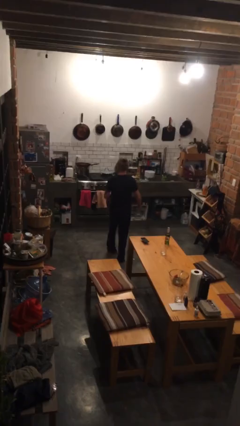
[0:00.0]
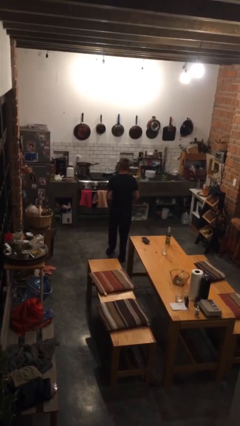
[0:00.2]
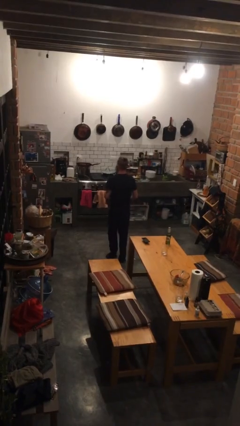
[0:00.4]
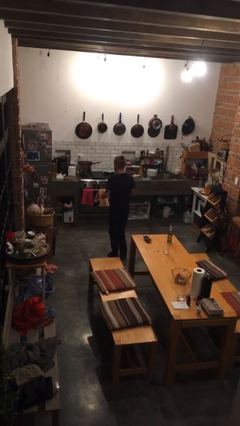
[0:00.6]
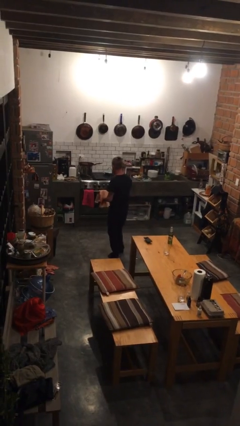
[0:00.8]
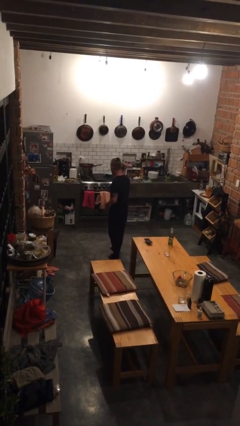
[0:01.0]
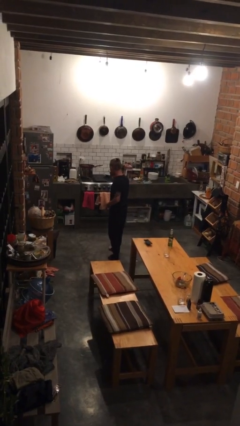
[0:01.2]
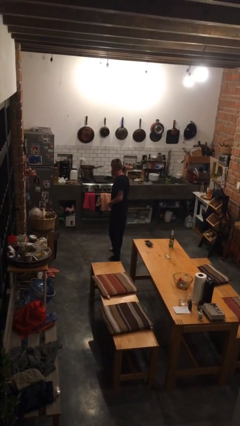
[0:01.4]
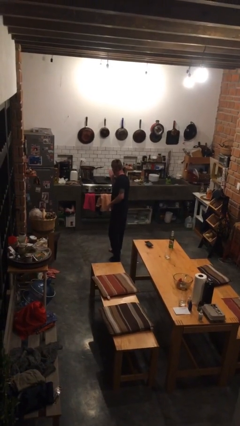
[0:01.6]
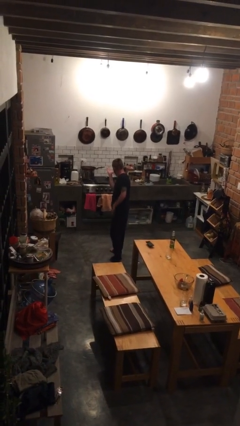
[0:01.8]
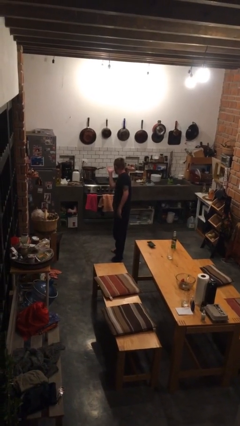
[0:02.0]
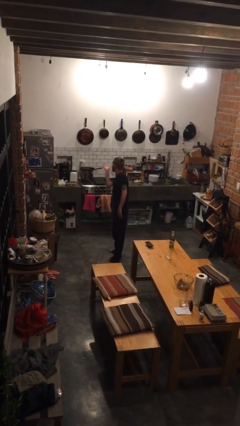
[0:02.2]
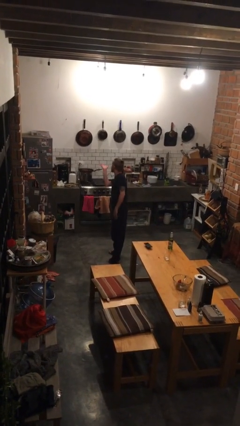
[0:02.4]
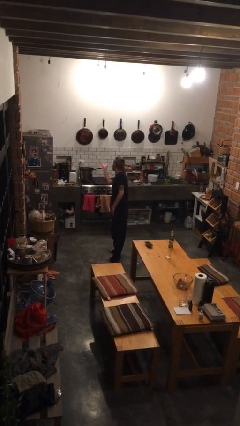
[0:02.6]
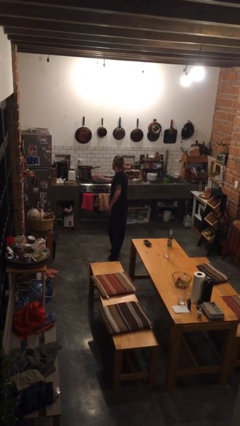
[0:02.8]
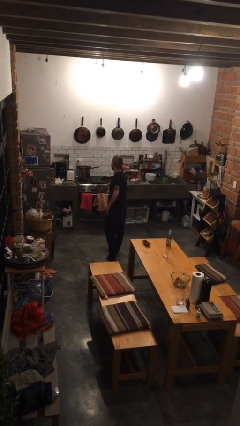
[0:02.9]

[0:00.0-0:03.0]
person gestures blow kiss

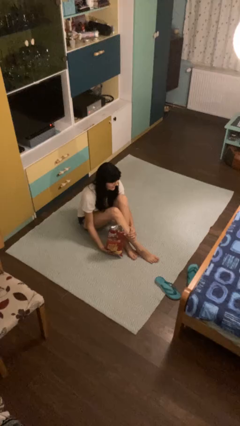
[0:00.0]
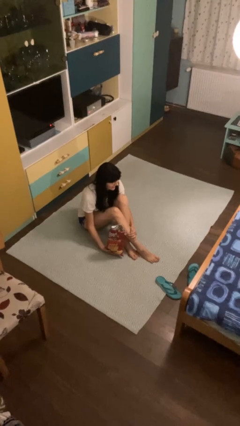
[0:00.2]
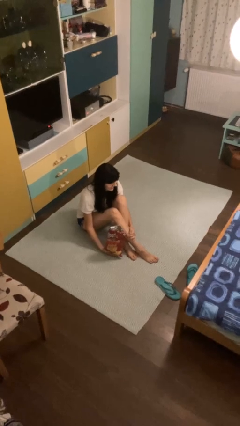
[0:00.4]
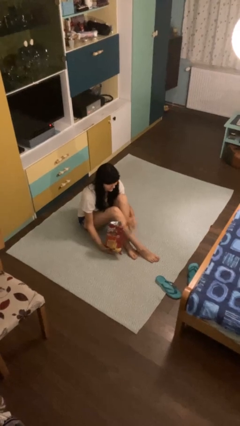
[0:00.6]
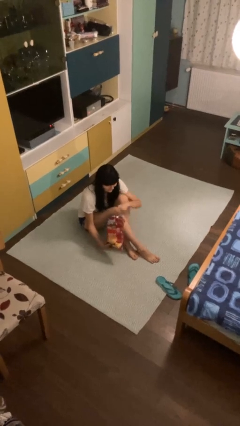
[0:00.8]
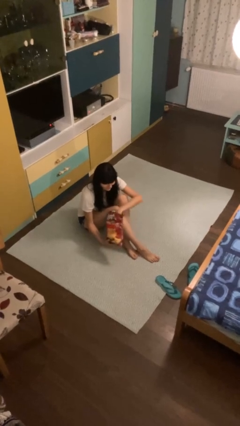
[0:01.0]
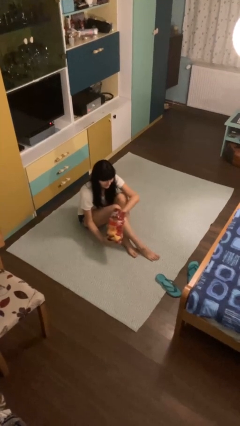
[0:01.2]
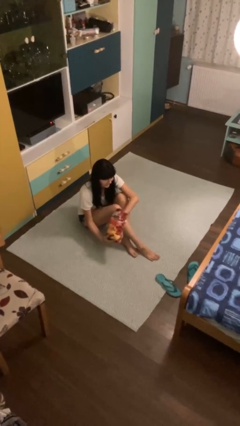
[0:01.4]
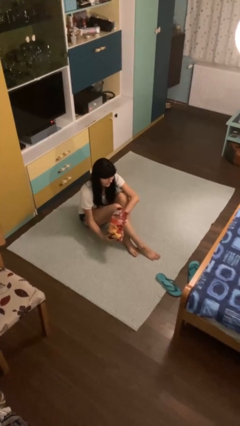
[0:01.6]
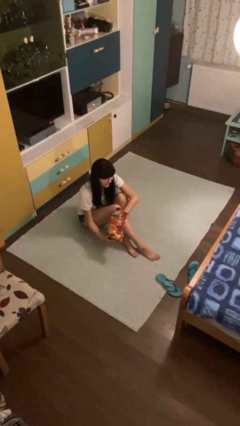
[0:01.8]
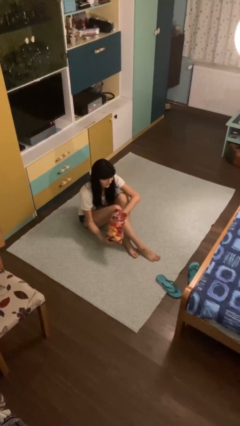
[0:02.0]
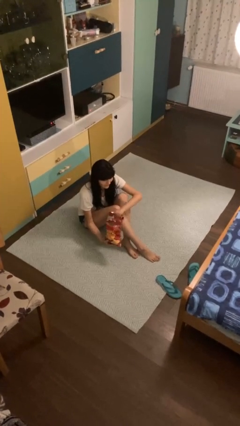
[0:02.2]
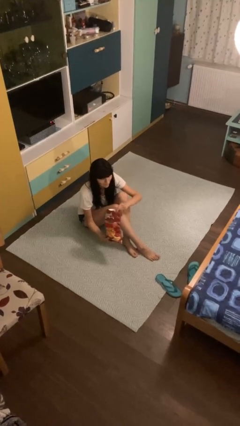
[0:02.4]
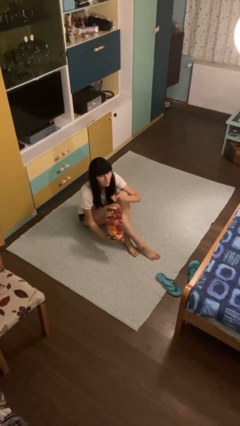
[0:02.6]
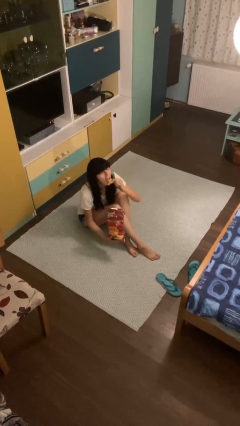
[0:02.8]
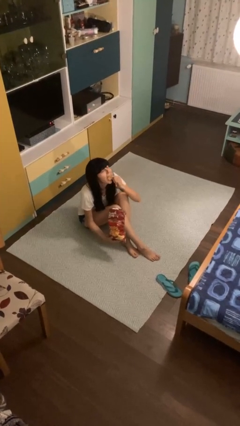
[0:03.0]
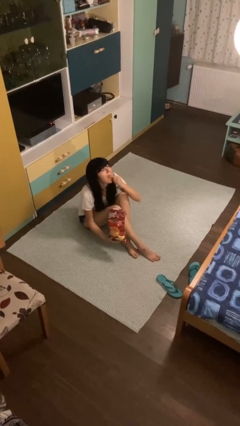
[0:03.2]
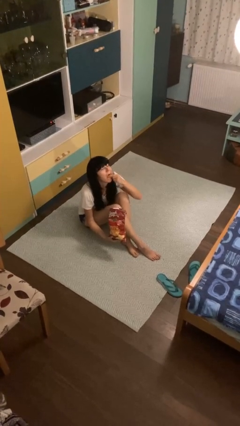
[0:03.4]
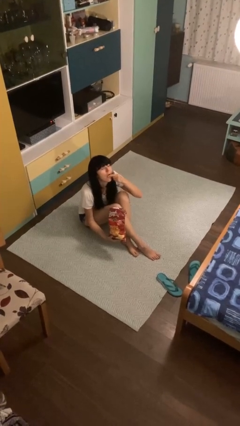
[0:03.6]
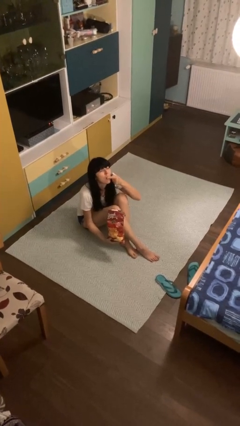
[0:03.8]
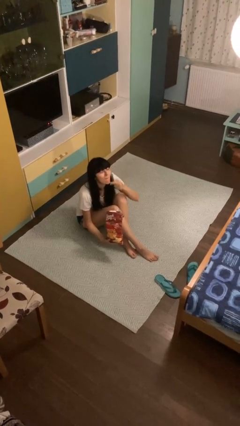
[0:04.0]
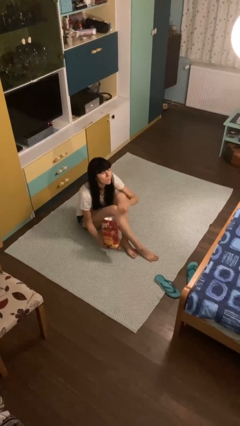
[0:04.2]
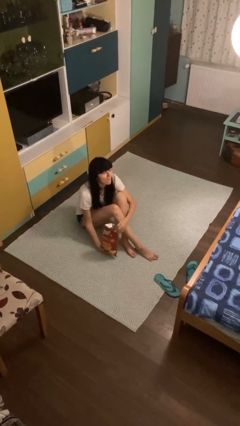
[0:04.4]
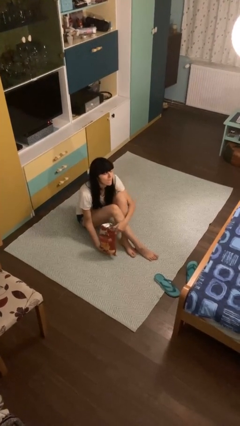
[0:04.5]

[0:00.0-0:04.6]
person eats snack from bag

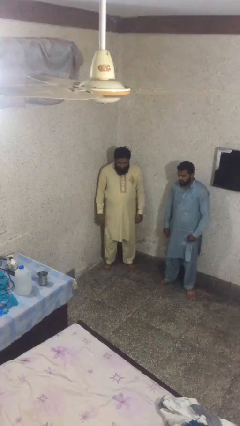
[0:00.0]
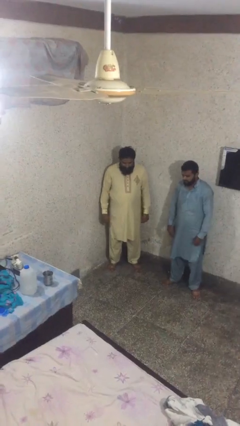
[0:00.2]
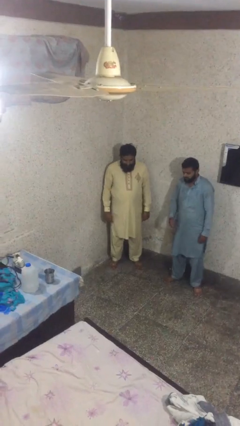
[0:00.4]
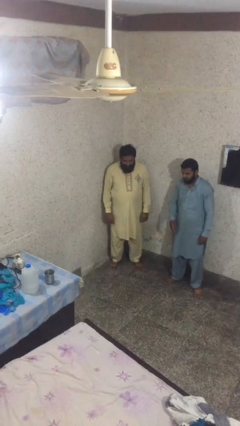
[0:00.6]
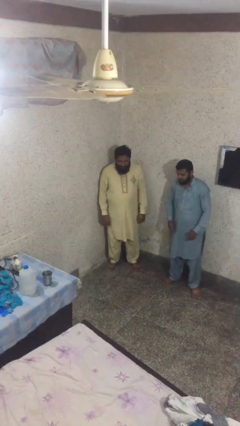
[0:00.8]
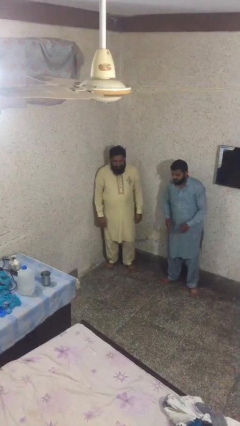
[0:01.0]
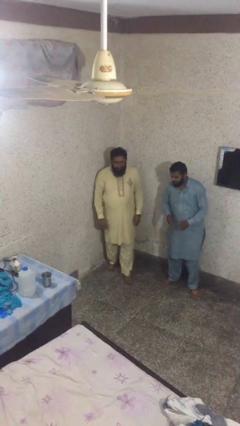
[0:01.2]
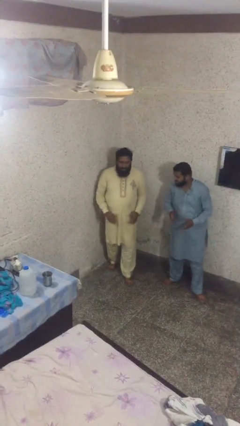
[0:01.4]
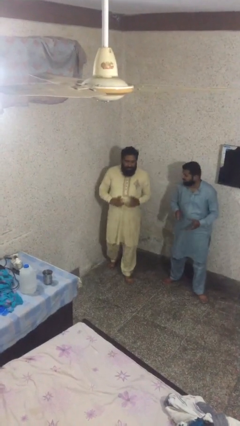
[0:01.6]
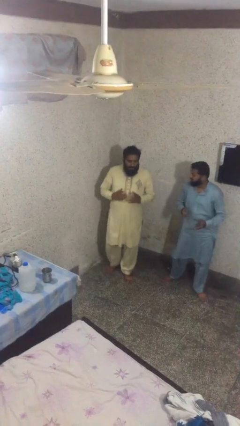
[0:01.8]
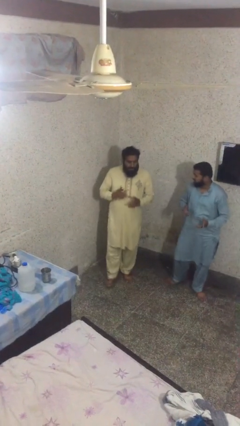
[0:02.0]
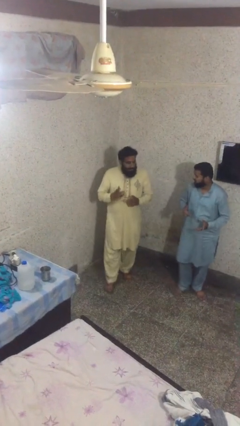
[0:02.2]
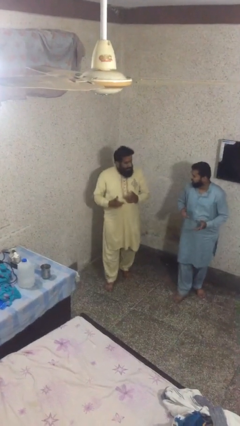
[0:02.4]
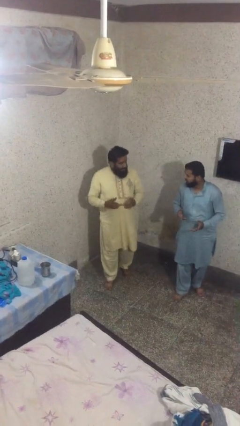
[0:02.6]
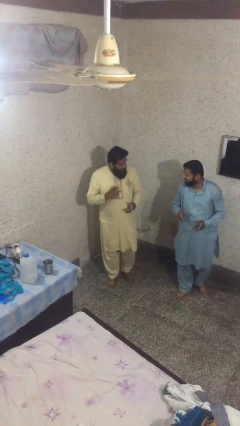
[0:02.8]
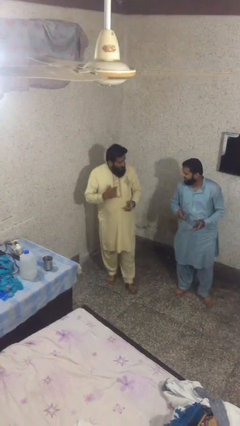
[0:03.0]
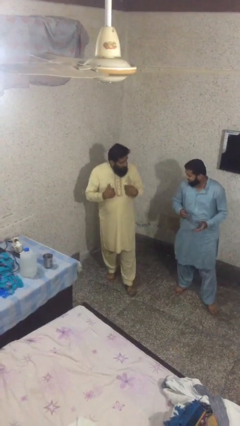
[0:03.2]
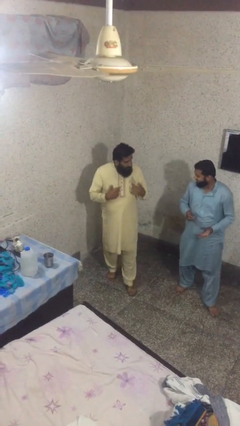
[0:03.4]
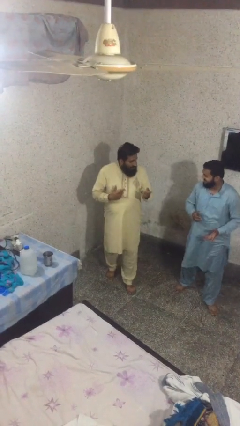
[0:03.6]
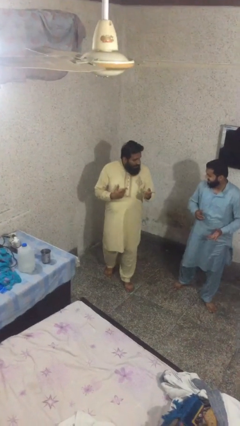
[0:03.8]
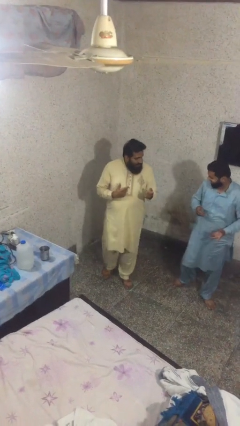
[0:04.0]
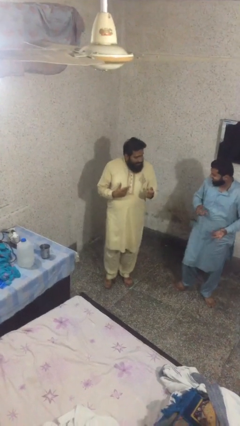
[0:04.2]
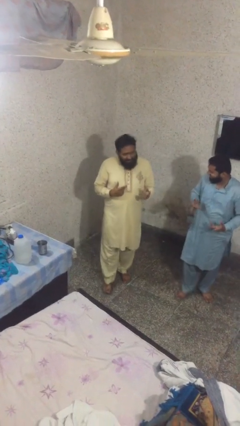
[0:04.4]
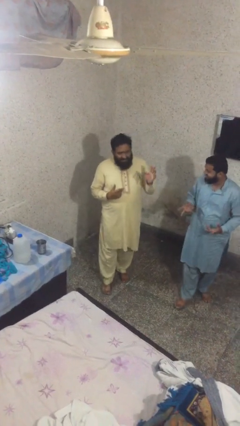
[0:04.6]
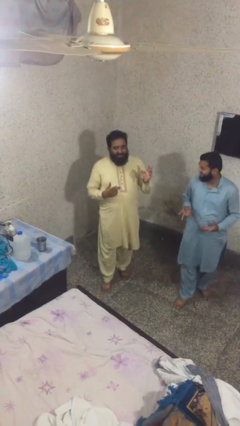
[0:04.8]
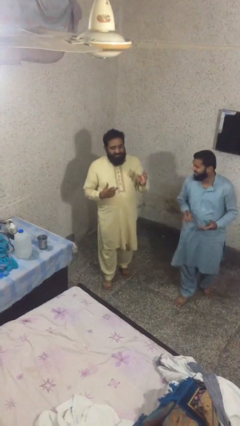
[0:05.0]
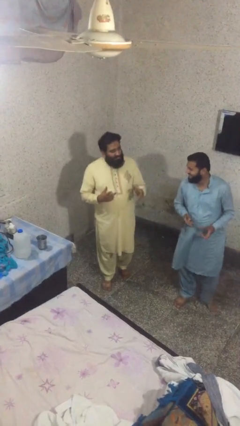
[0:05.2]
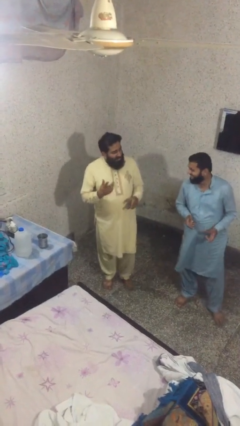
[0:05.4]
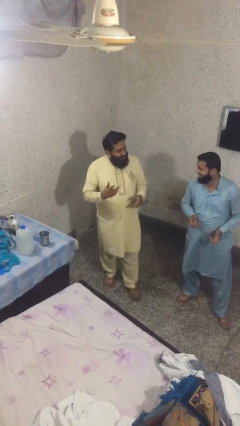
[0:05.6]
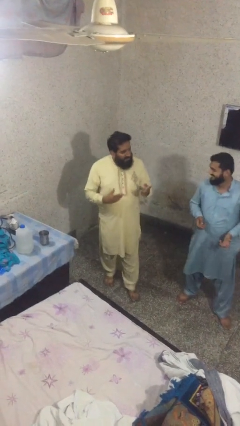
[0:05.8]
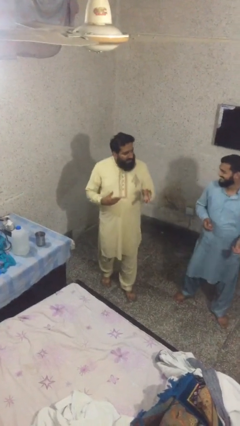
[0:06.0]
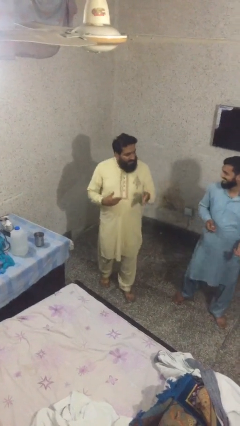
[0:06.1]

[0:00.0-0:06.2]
person talks to person

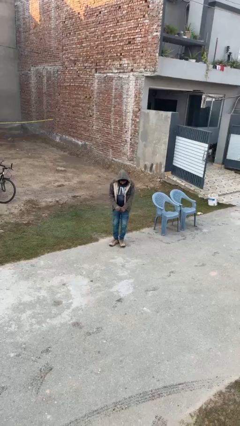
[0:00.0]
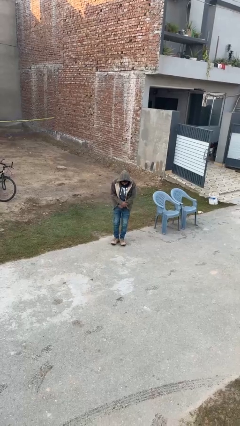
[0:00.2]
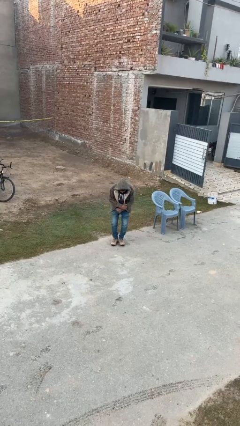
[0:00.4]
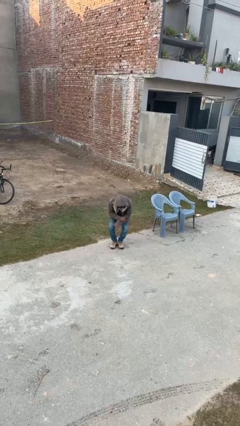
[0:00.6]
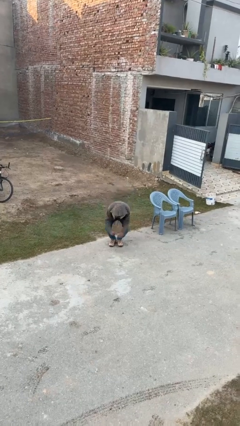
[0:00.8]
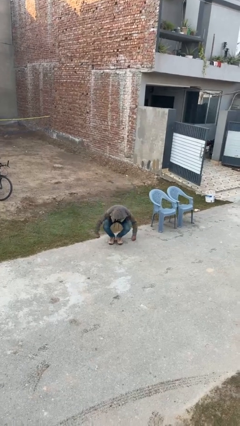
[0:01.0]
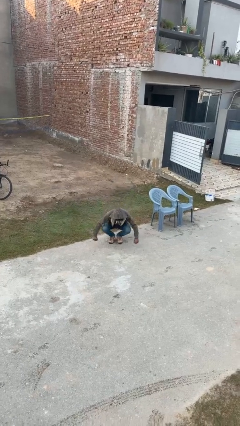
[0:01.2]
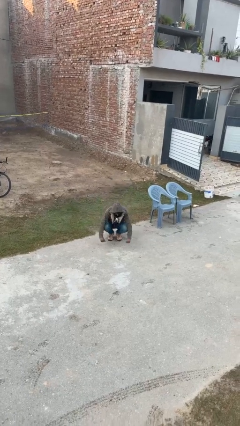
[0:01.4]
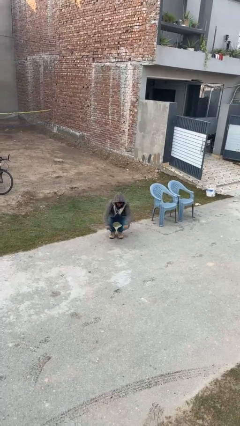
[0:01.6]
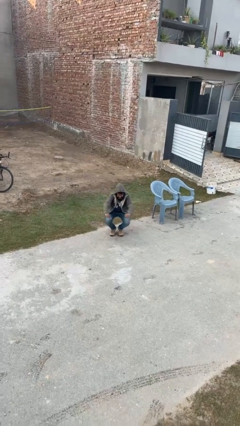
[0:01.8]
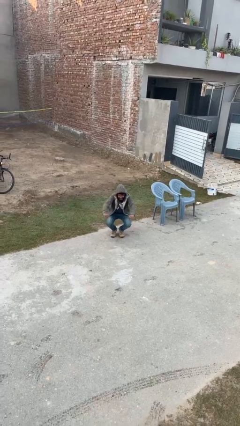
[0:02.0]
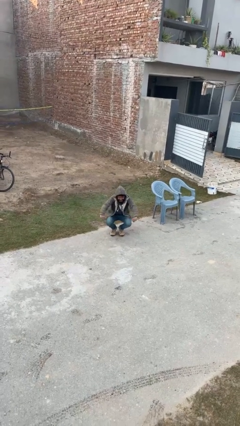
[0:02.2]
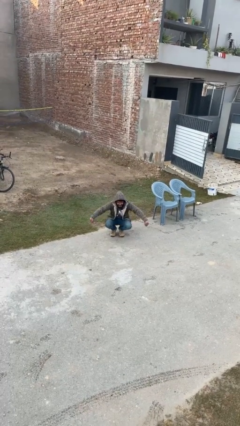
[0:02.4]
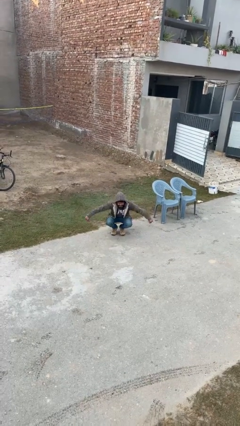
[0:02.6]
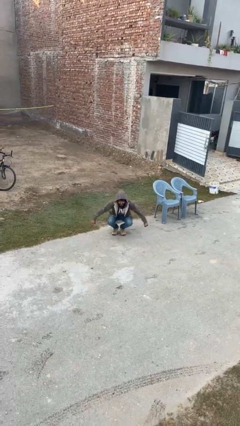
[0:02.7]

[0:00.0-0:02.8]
person sits down

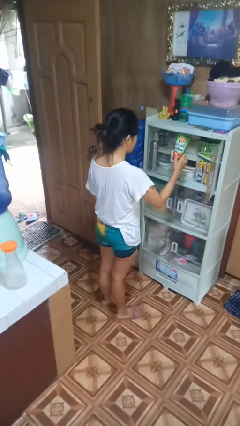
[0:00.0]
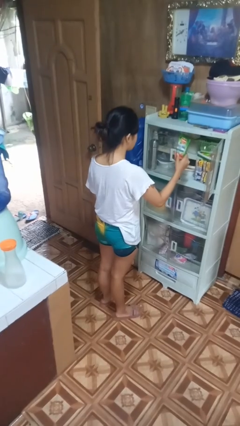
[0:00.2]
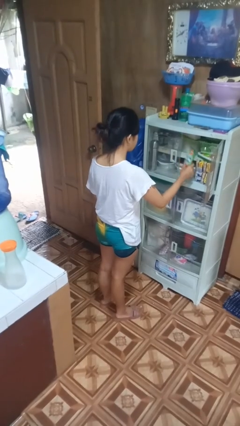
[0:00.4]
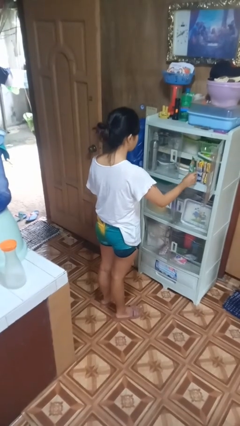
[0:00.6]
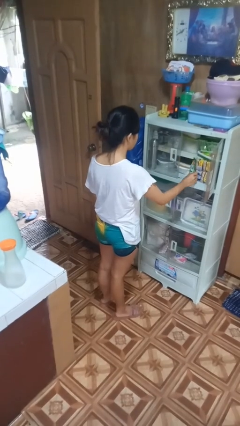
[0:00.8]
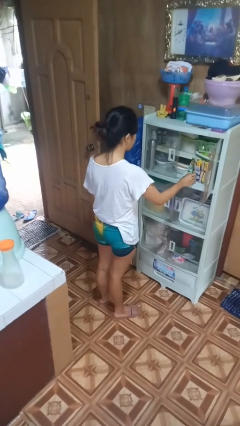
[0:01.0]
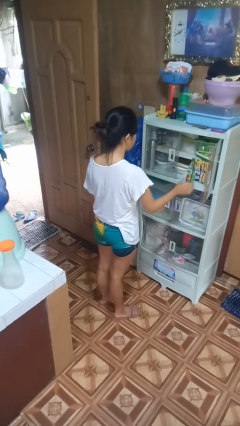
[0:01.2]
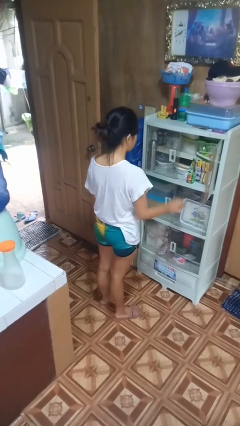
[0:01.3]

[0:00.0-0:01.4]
person puts down object into cabinet
